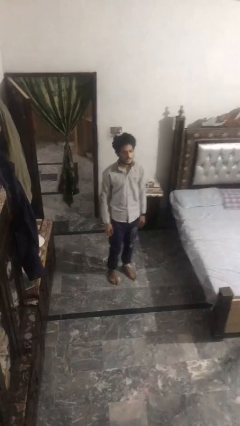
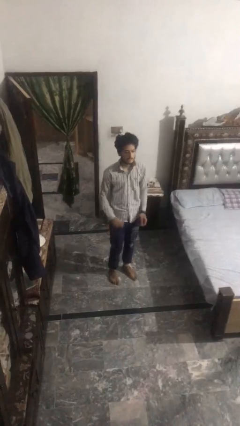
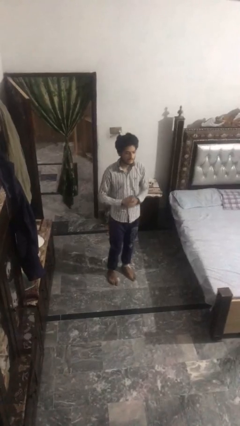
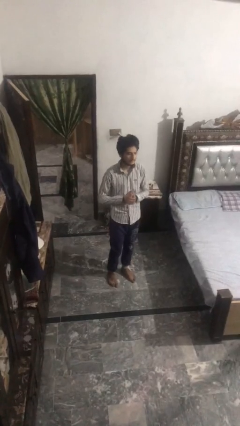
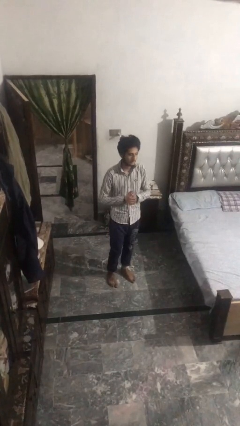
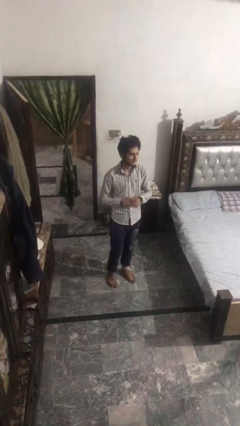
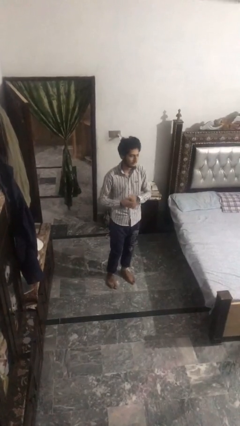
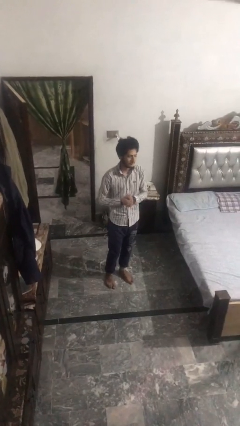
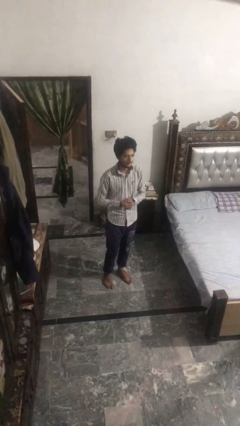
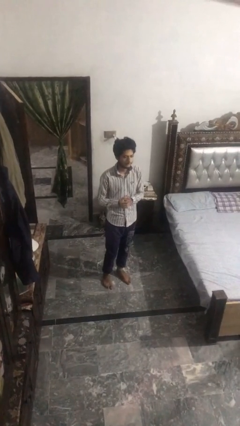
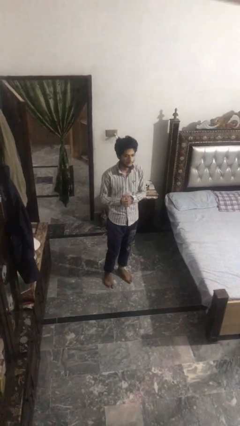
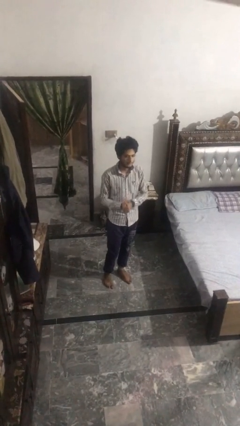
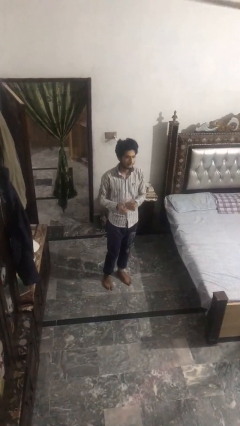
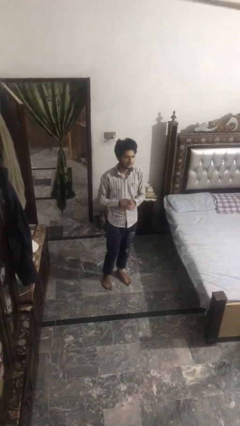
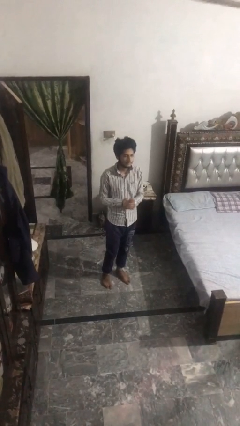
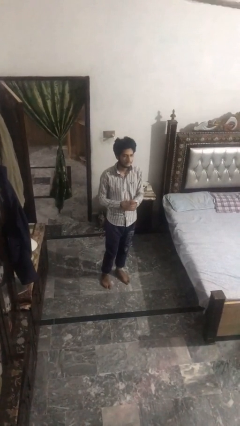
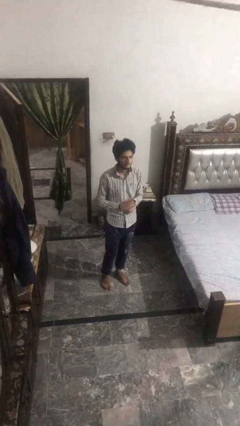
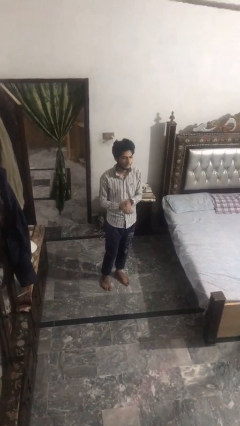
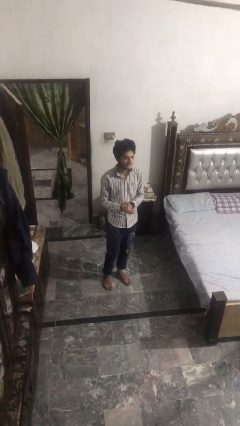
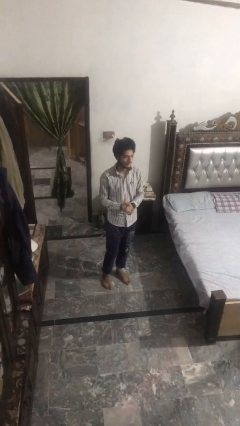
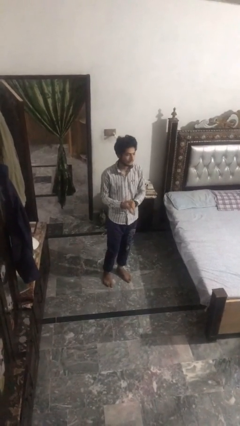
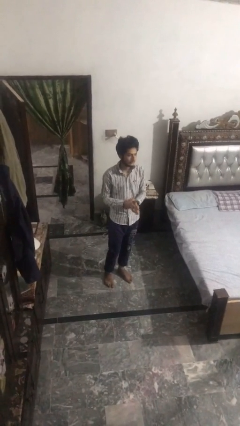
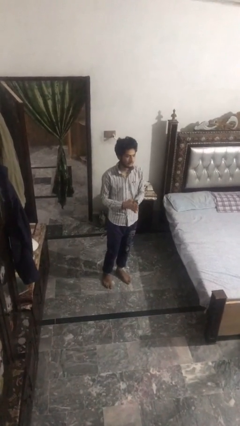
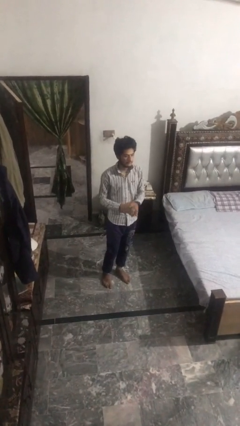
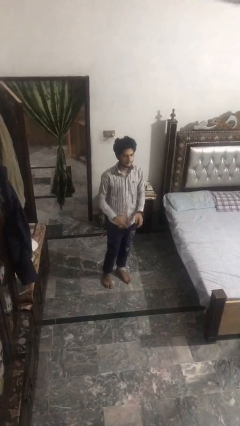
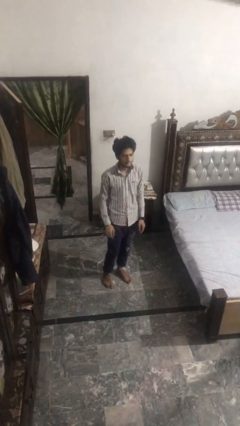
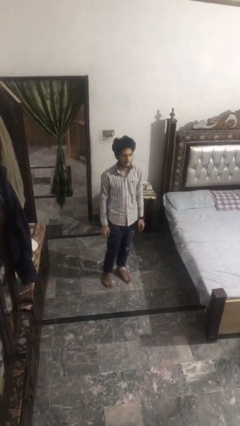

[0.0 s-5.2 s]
person cracks knuckles

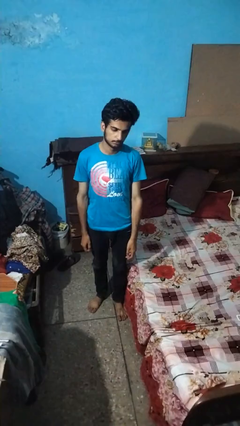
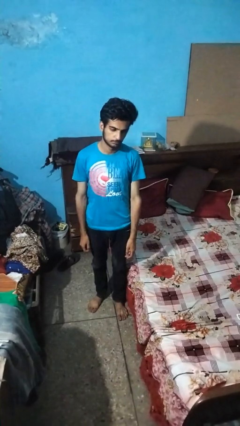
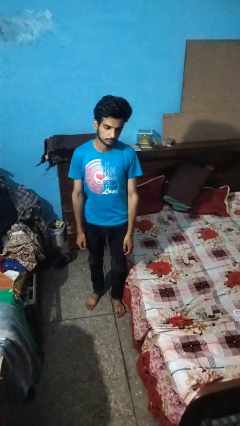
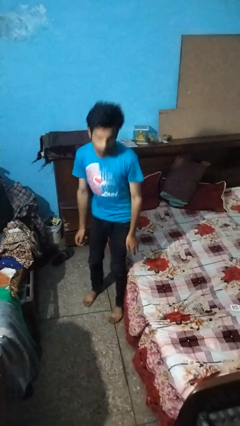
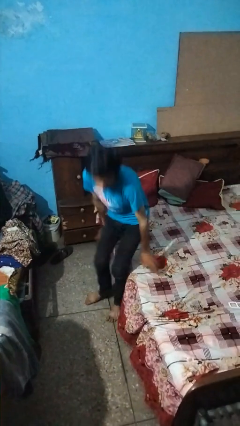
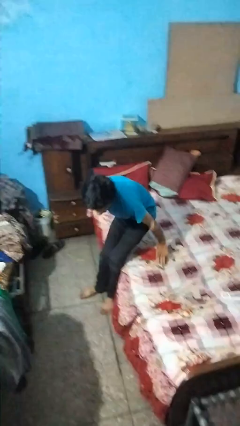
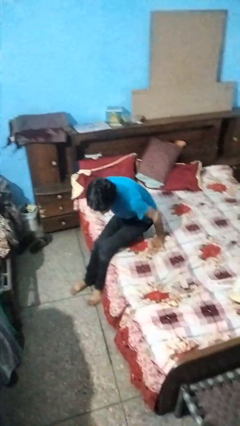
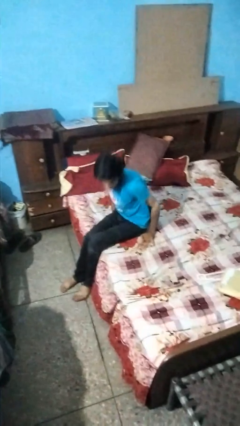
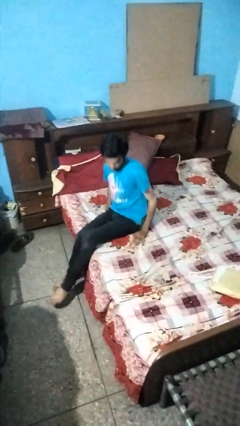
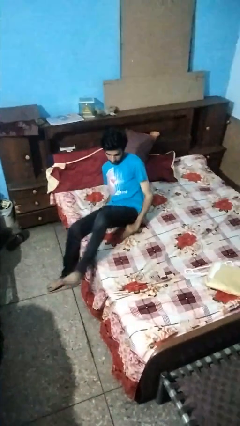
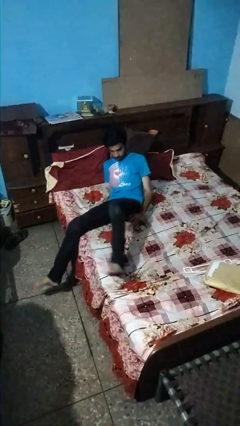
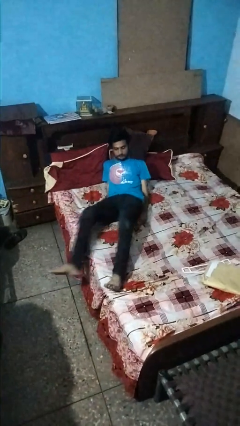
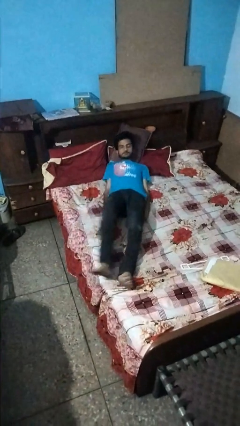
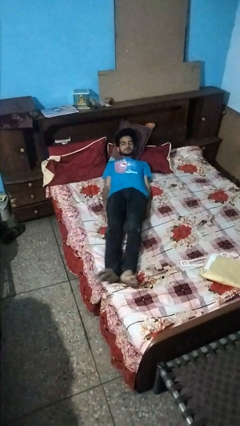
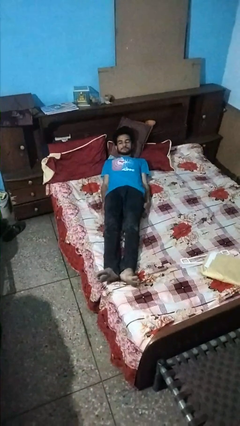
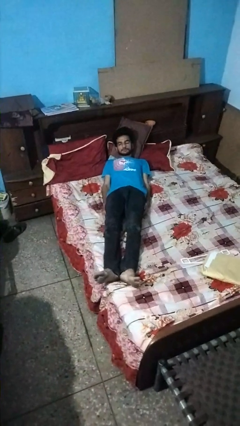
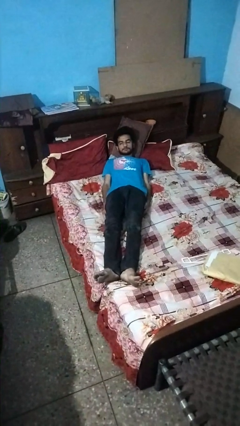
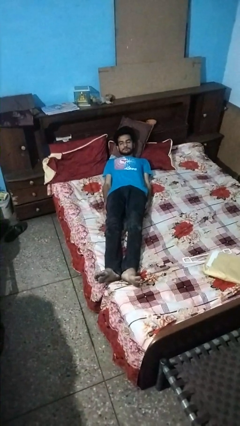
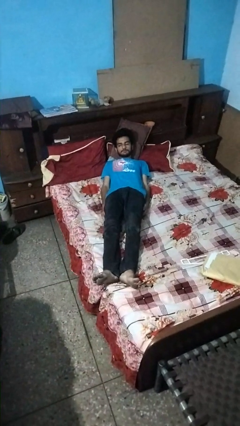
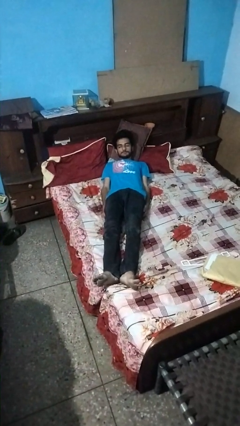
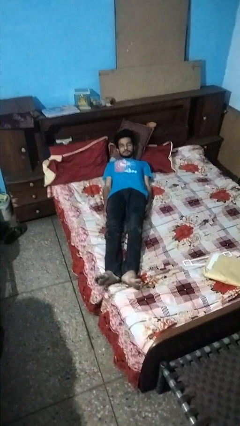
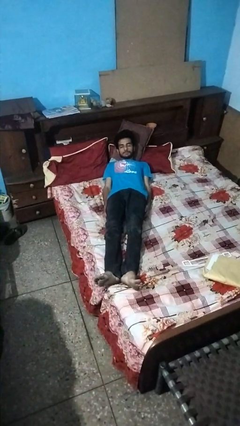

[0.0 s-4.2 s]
person lies down on bed

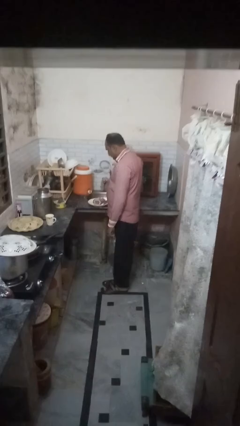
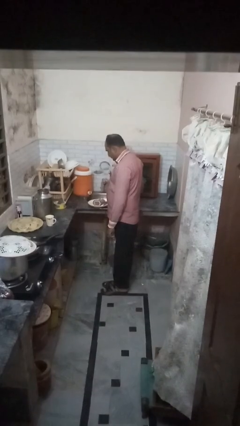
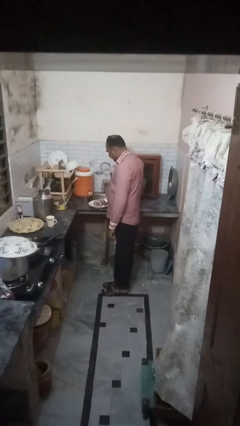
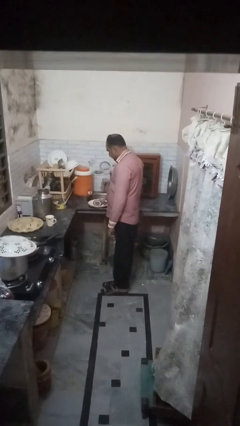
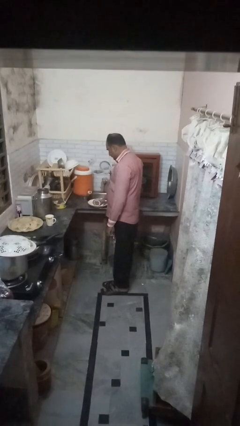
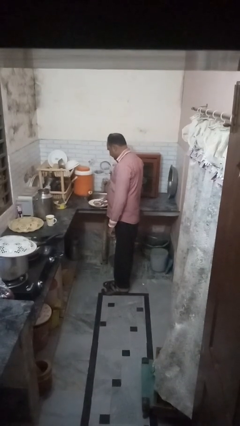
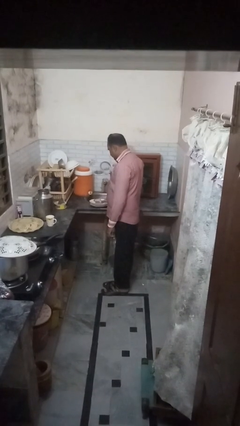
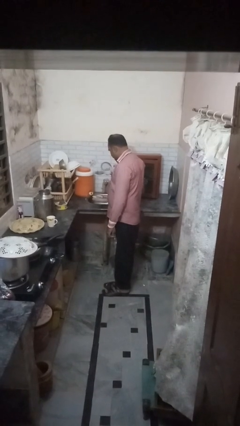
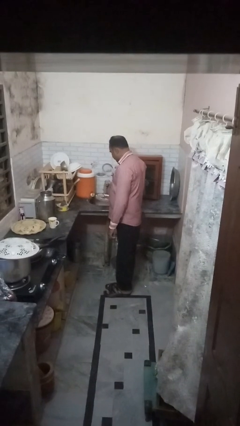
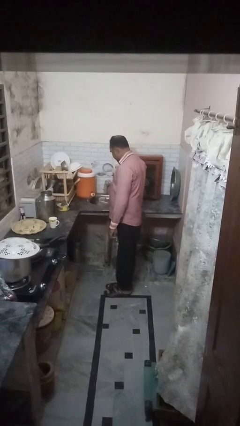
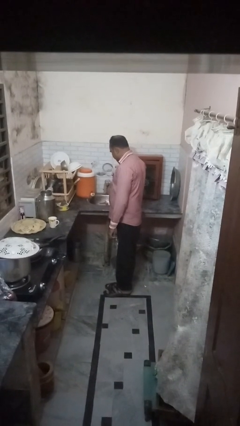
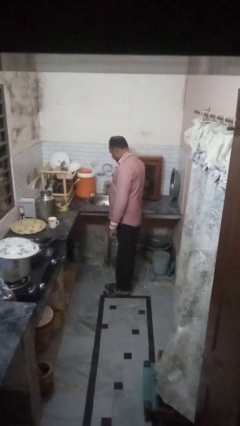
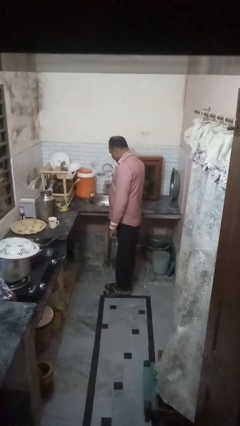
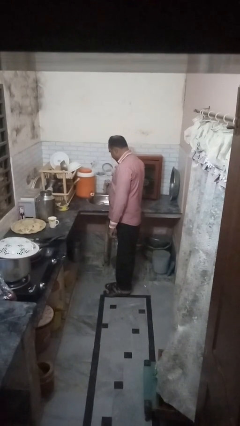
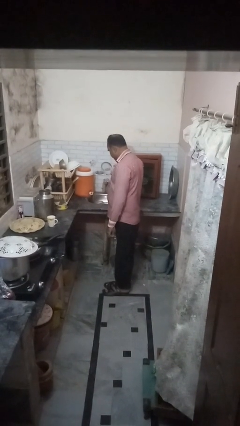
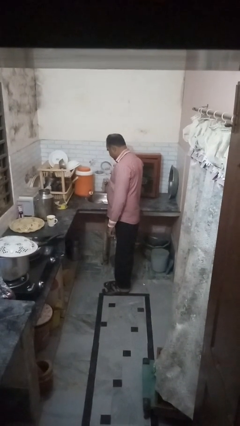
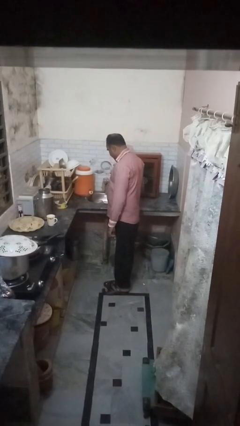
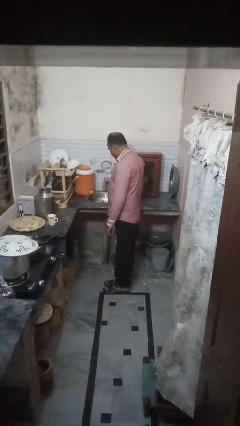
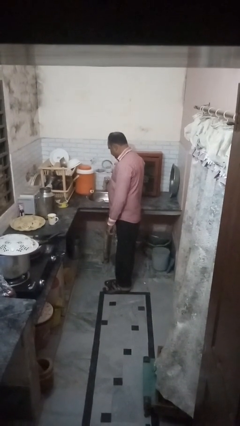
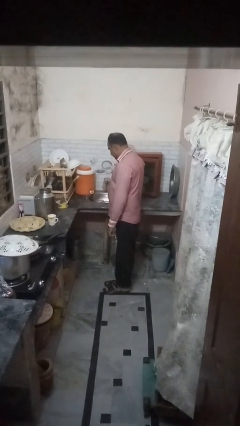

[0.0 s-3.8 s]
person loads dishwasher

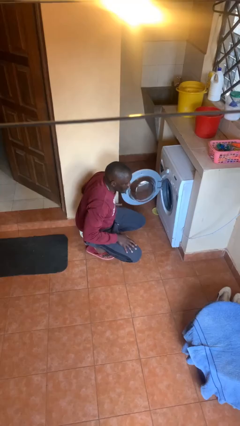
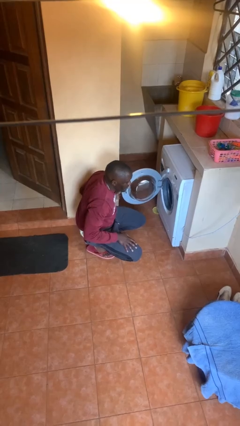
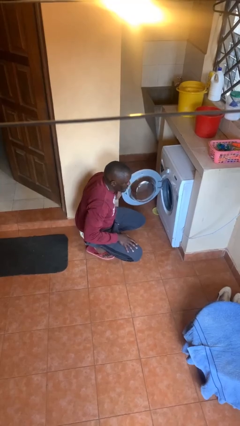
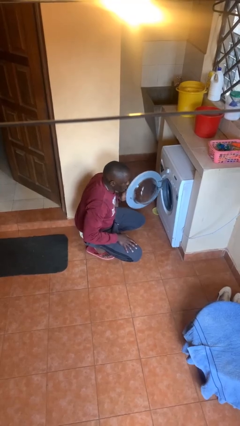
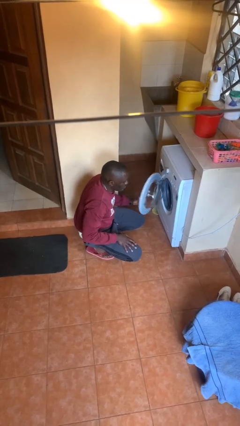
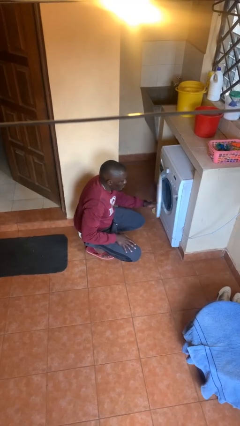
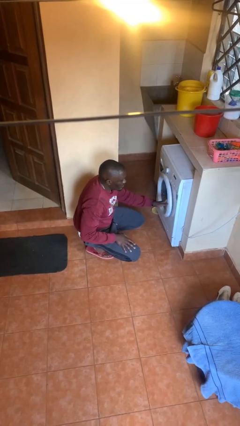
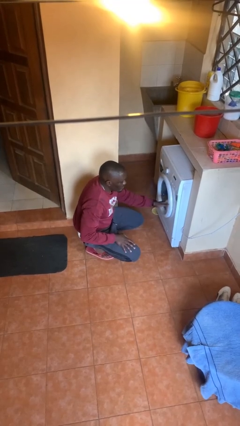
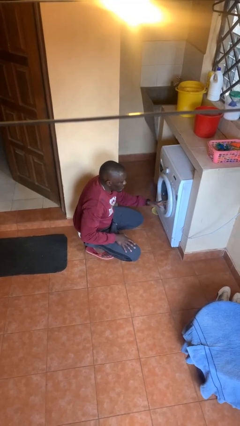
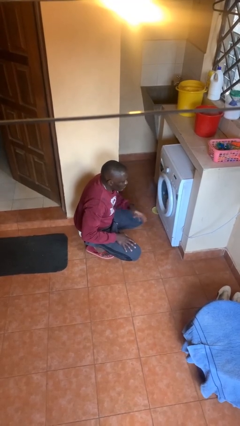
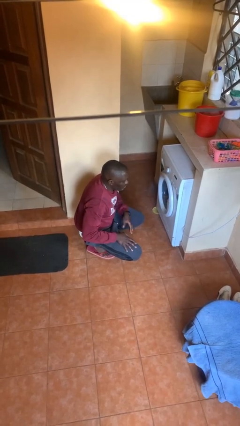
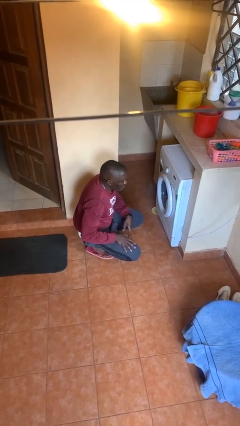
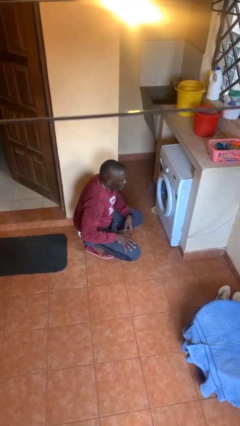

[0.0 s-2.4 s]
person closes clothes washer

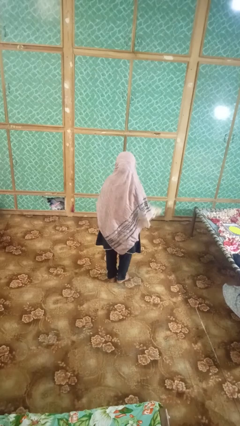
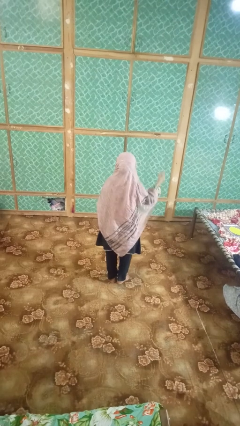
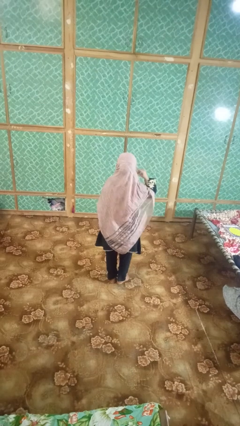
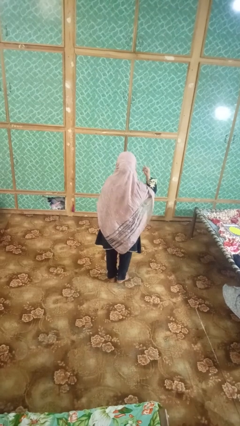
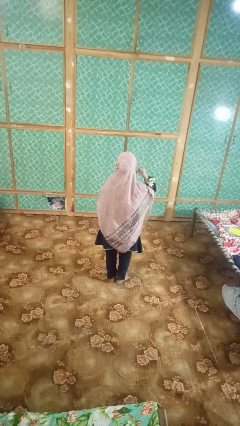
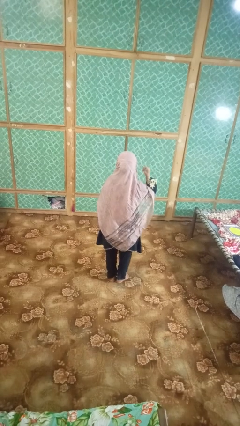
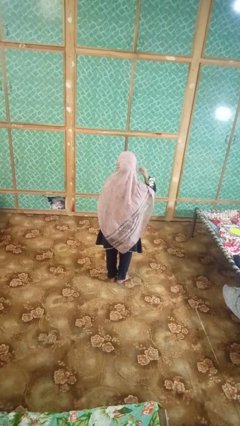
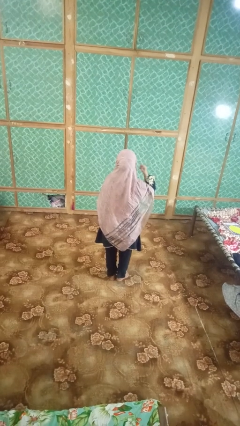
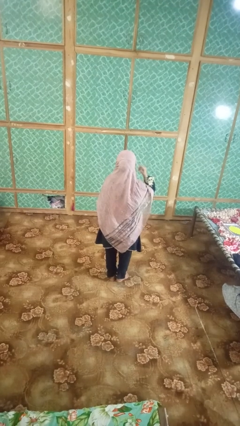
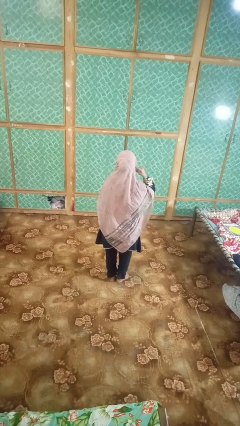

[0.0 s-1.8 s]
person gestures listen closely

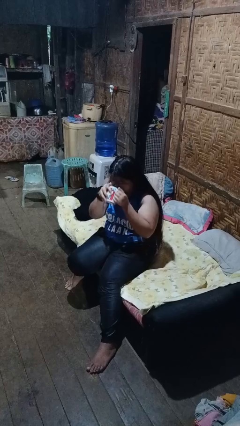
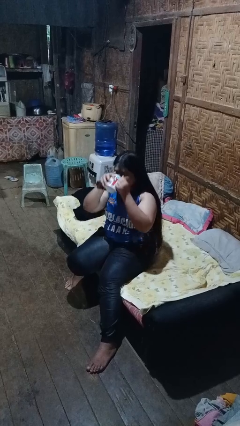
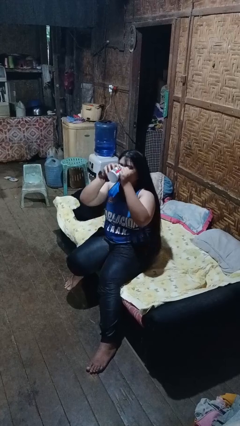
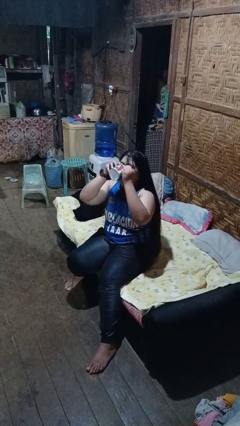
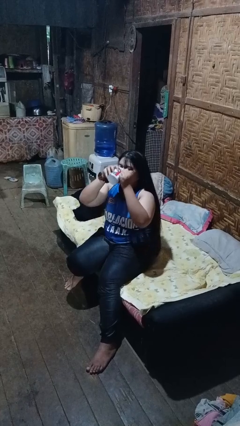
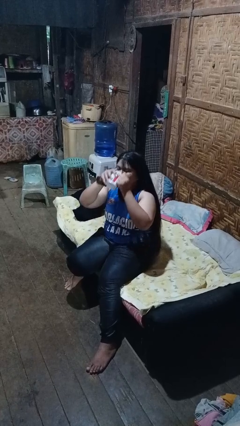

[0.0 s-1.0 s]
person drinks from mug
